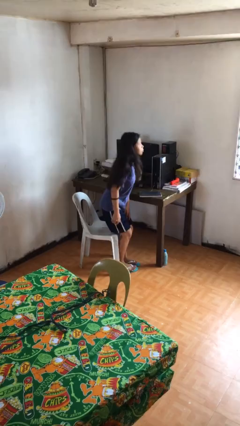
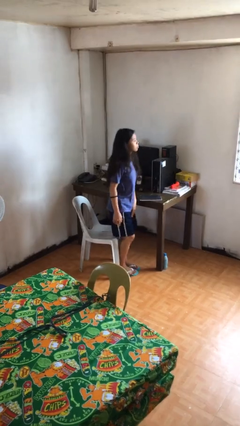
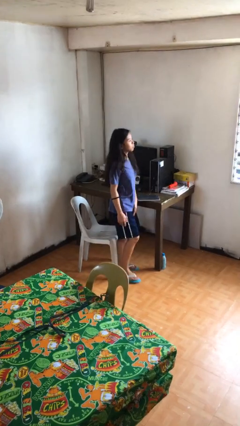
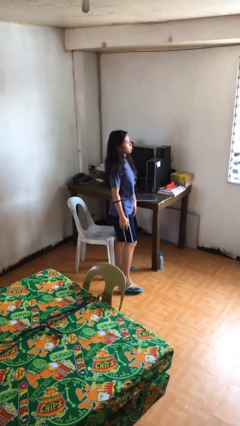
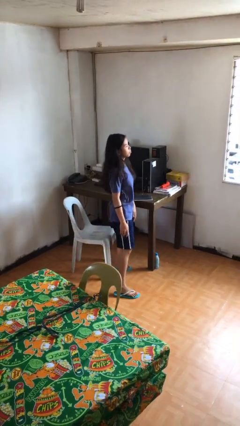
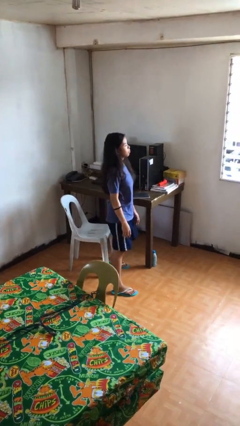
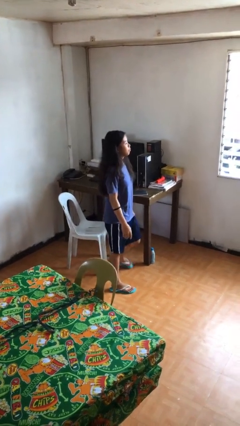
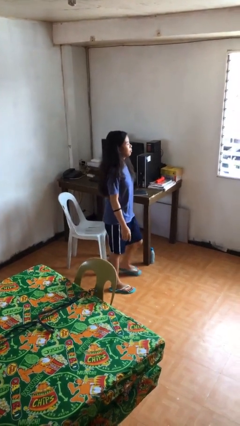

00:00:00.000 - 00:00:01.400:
person stands up

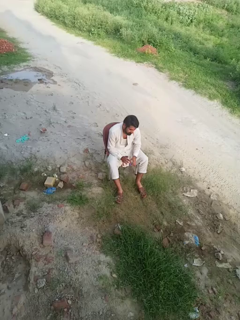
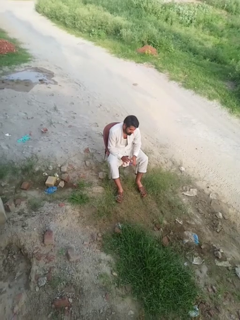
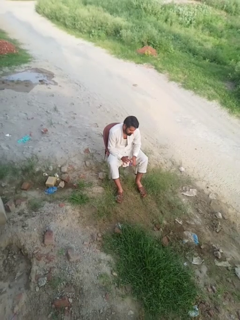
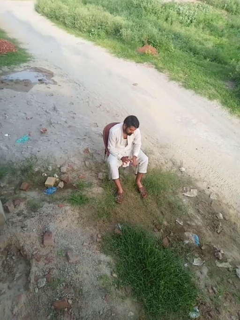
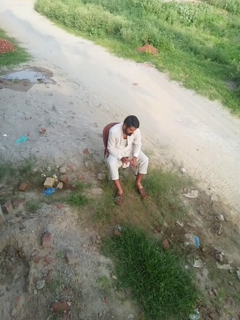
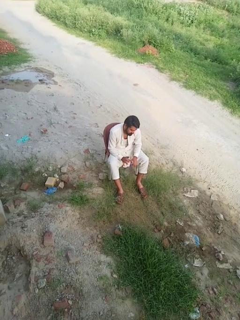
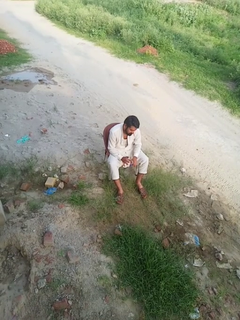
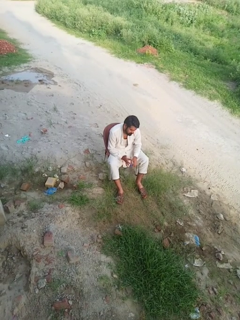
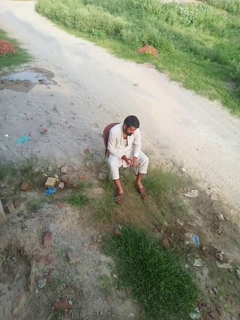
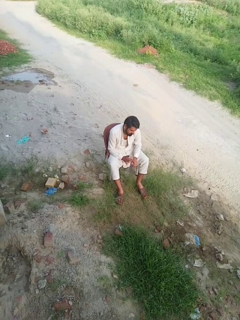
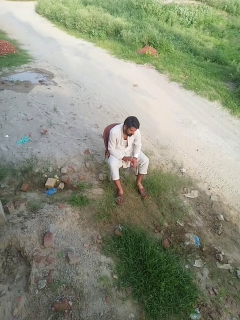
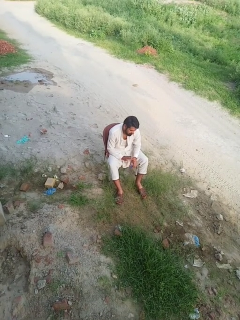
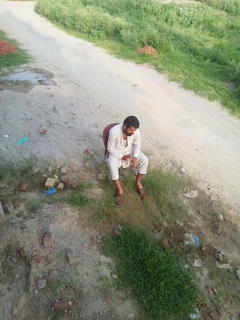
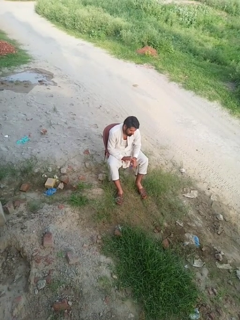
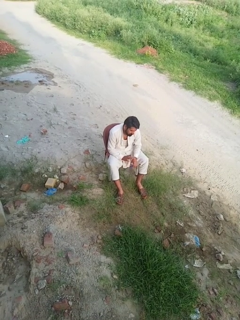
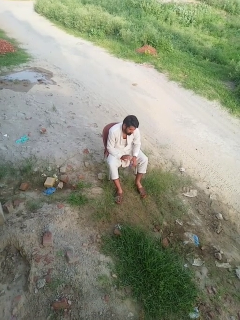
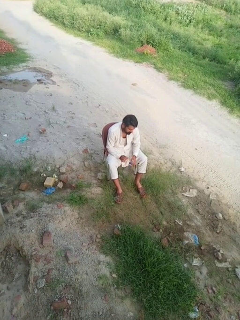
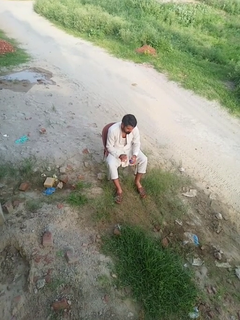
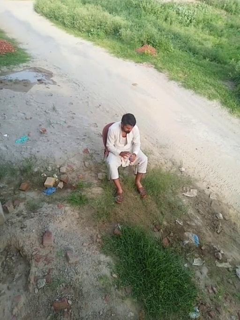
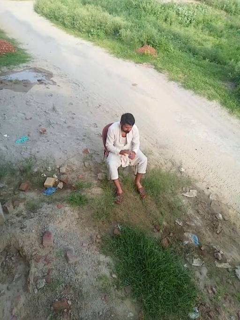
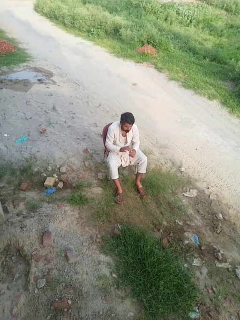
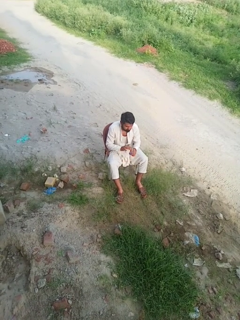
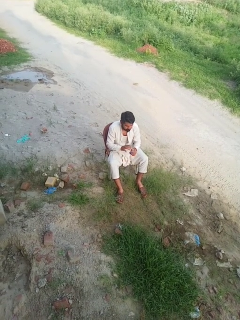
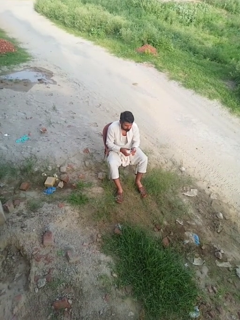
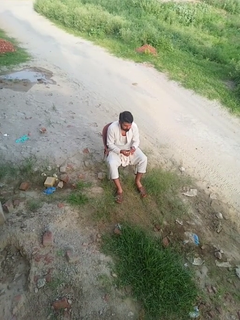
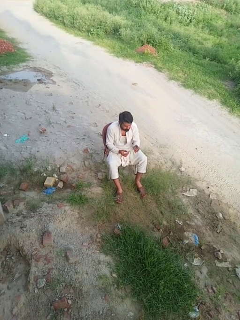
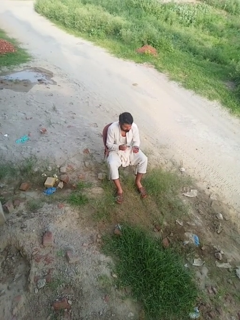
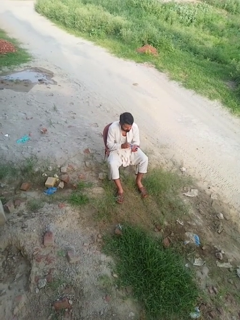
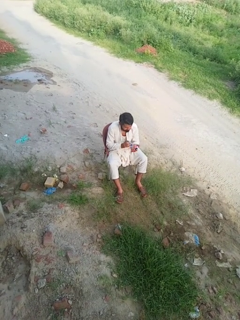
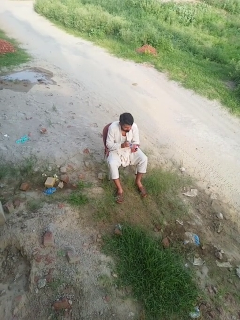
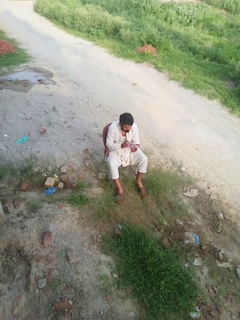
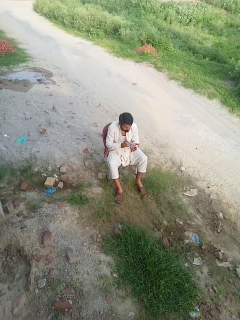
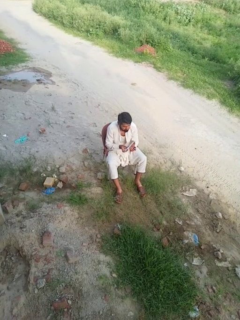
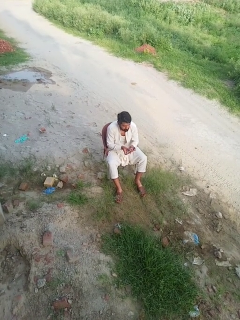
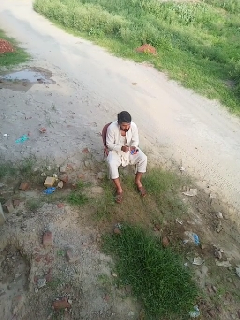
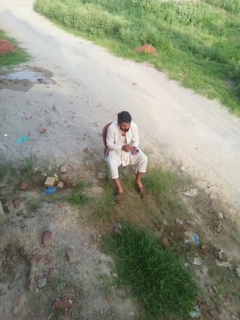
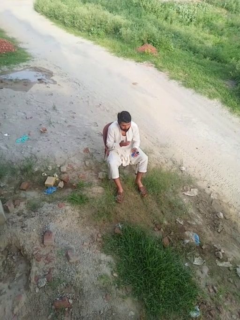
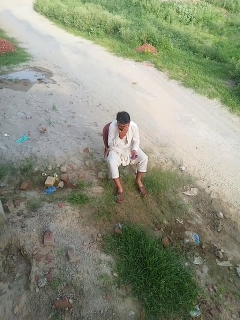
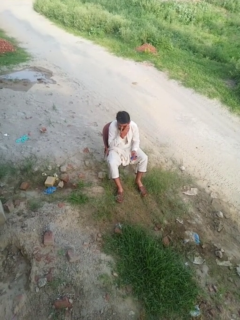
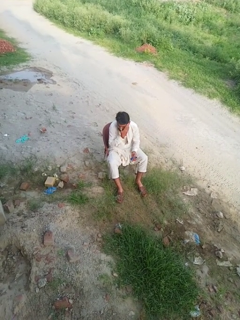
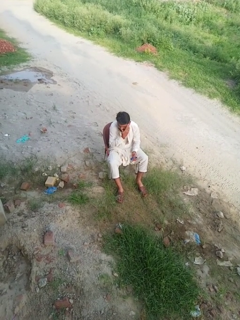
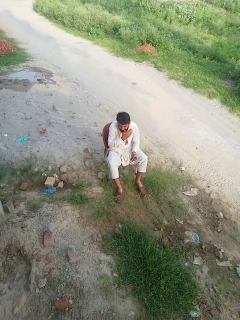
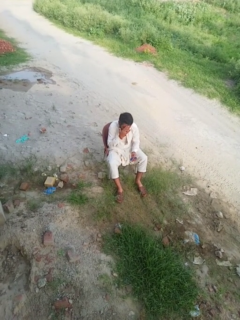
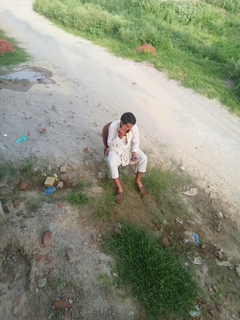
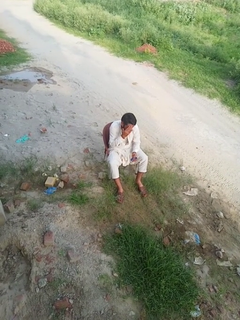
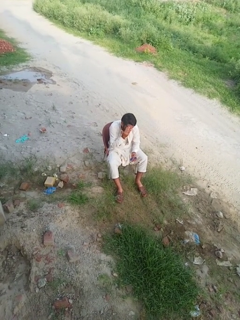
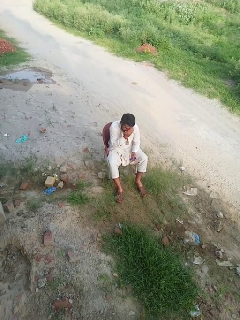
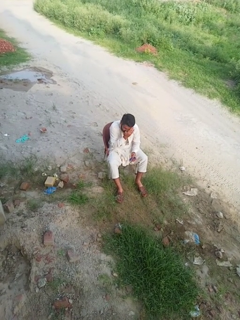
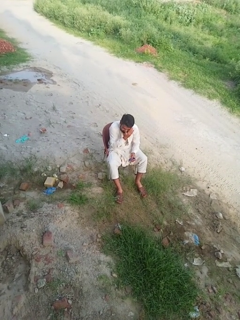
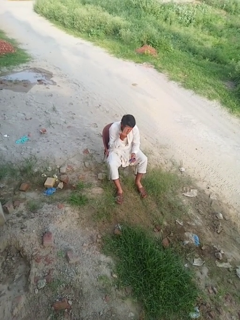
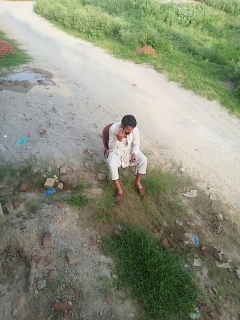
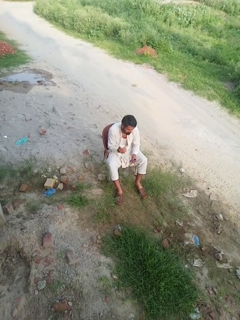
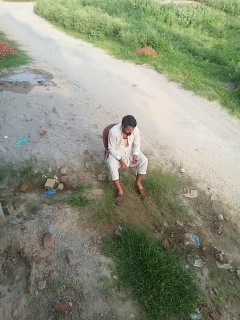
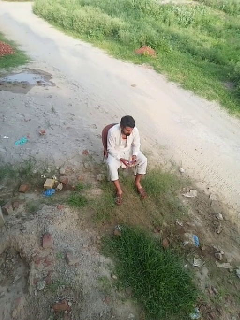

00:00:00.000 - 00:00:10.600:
person applies facial moisturizer

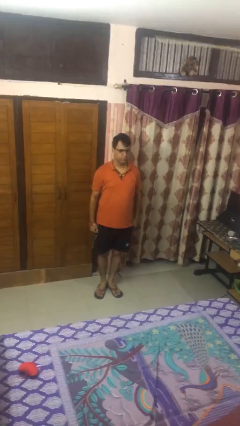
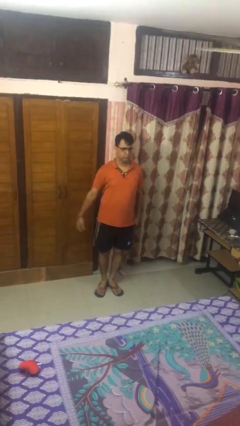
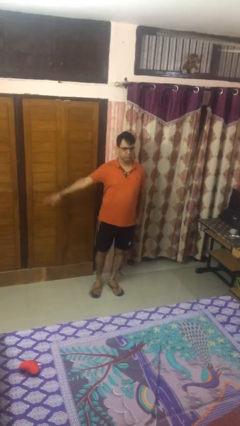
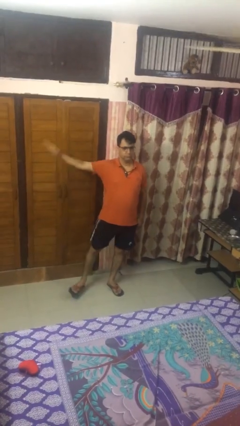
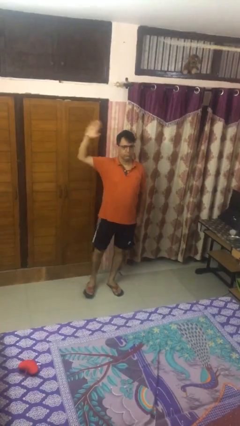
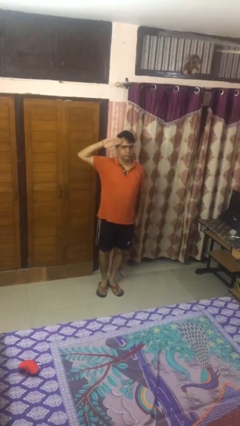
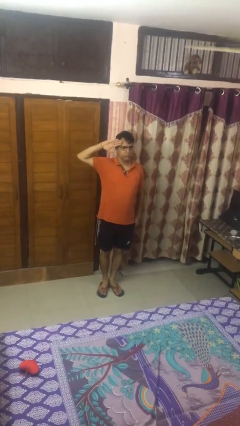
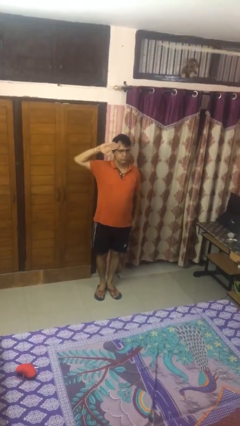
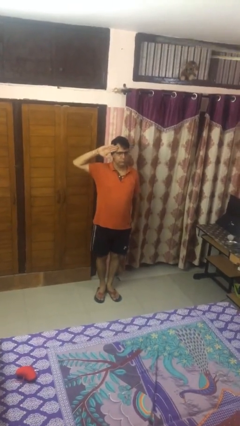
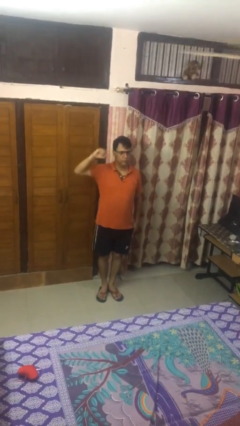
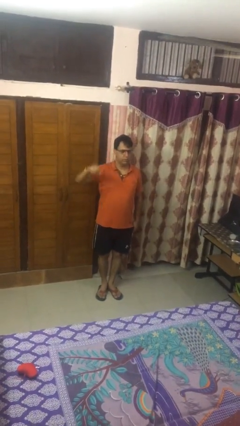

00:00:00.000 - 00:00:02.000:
person salutes

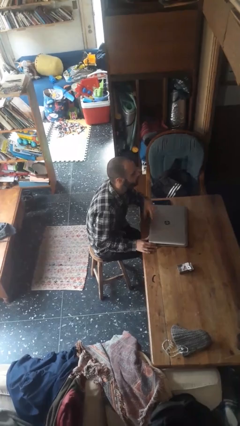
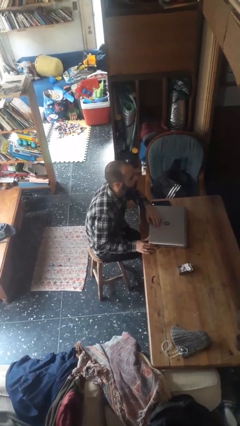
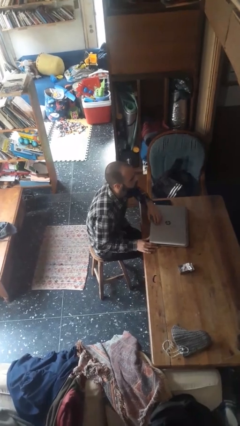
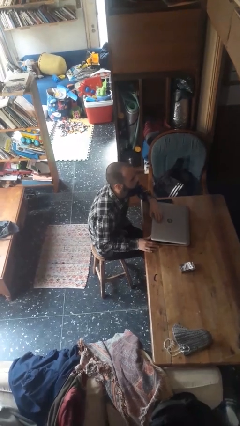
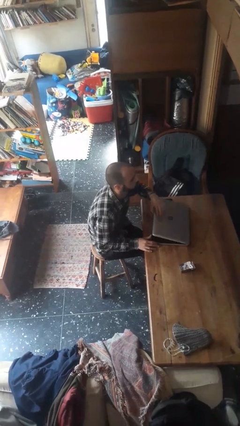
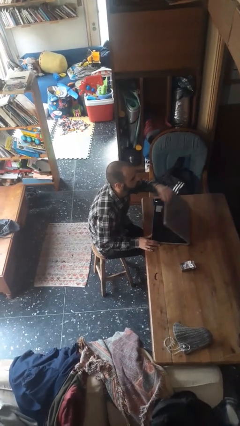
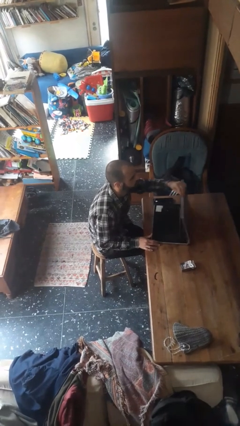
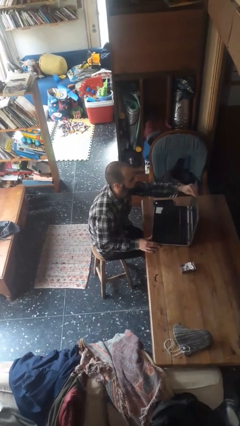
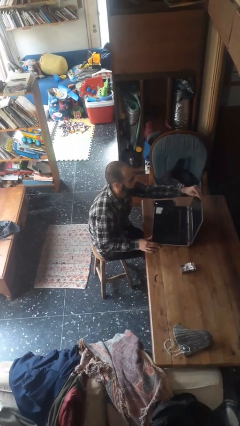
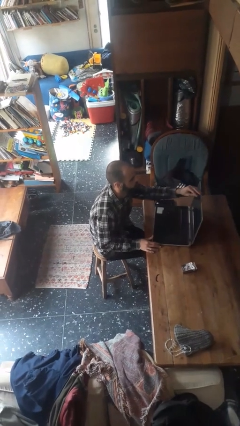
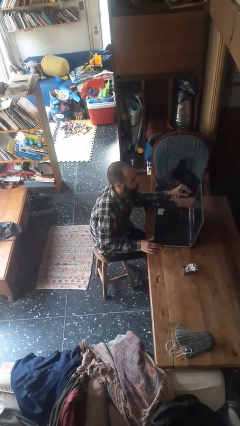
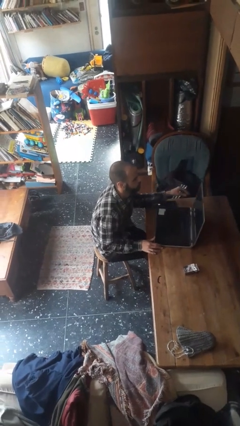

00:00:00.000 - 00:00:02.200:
person opens laptop

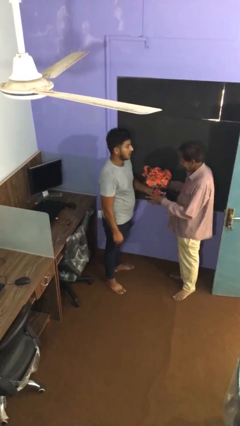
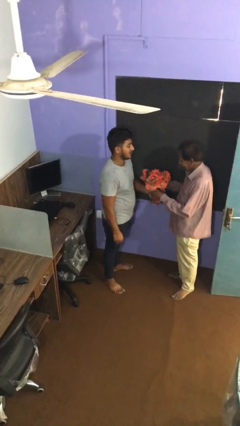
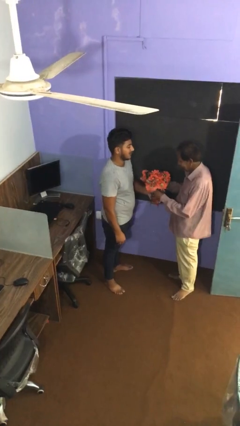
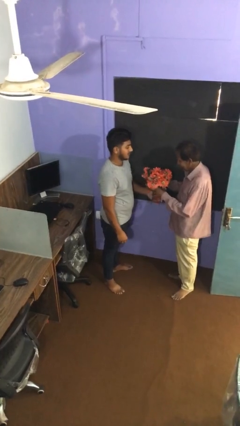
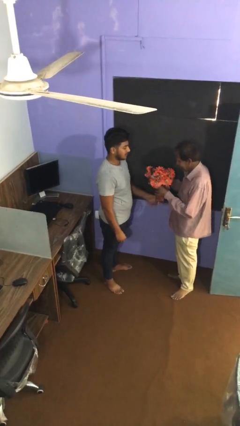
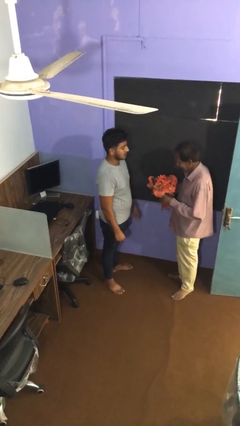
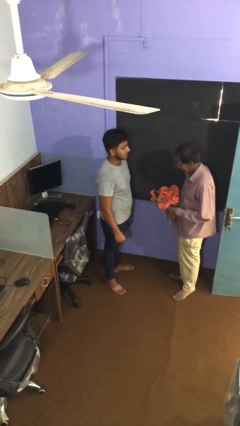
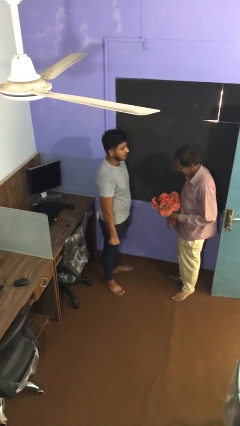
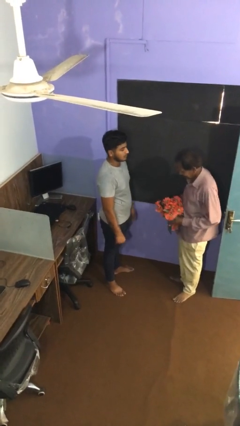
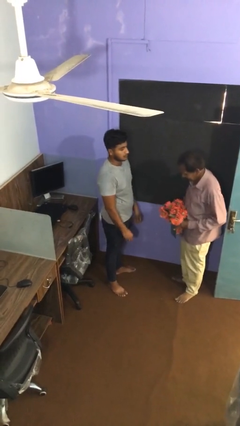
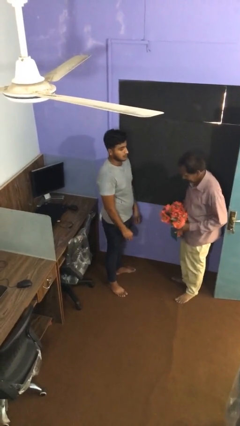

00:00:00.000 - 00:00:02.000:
person transfers object to person

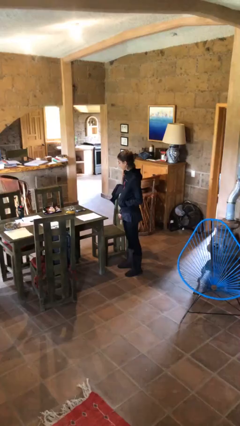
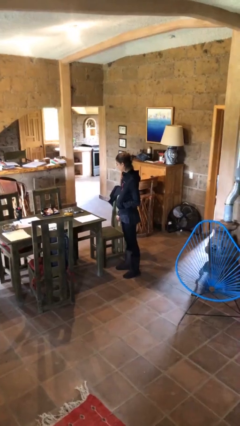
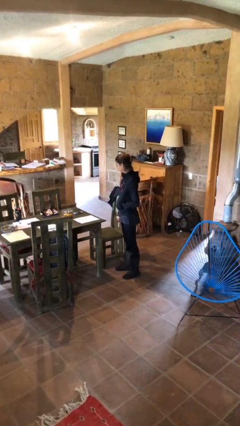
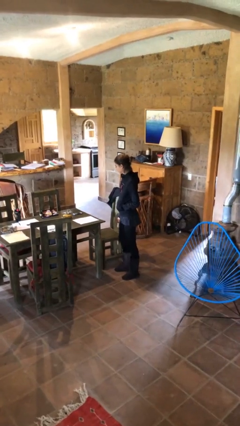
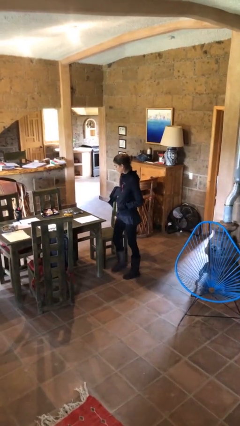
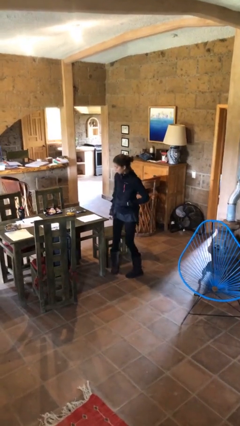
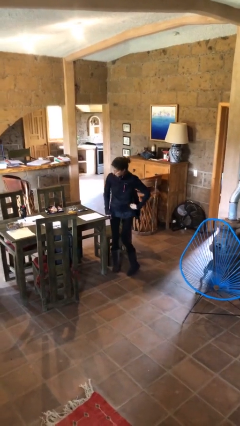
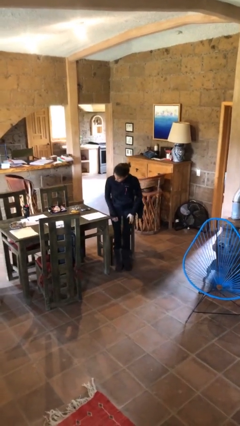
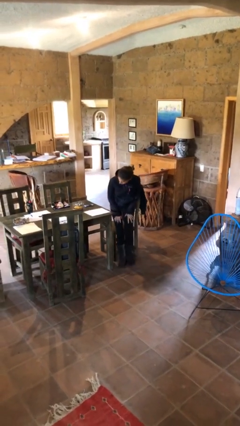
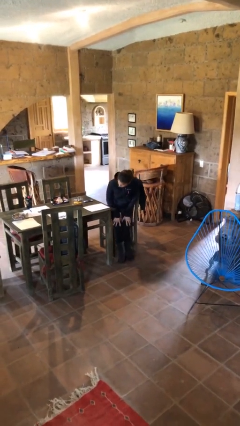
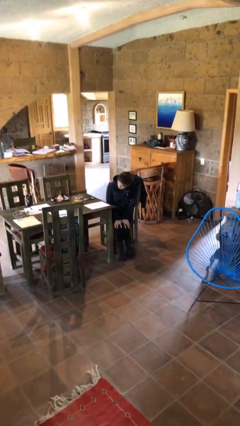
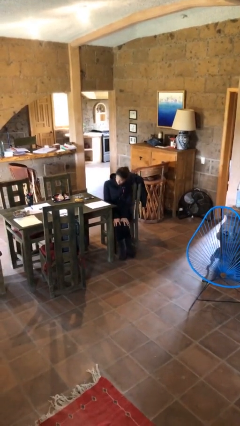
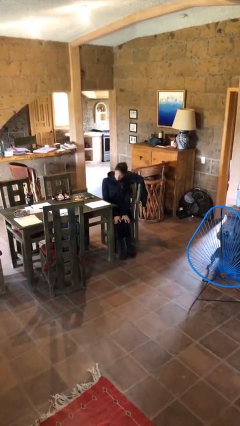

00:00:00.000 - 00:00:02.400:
person sits down
